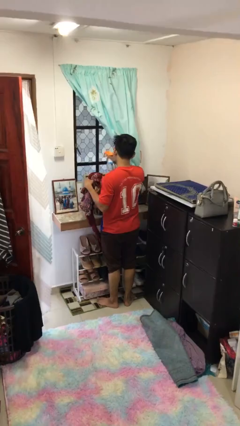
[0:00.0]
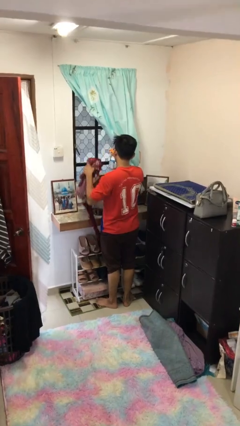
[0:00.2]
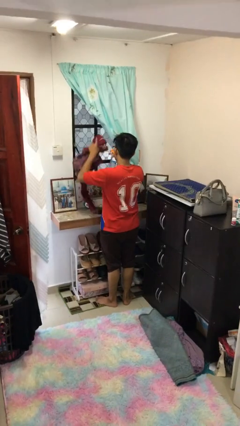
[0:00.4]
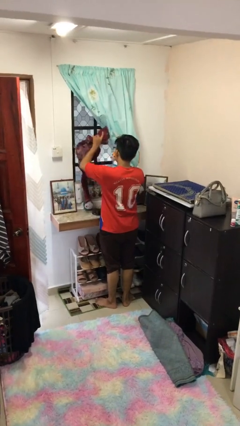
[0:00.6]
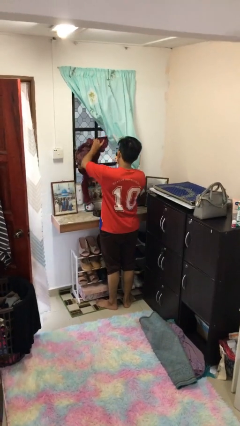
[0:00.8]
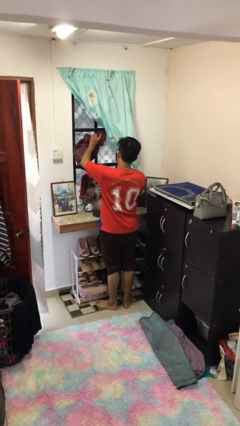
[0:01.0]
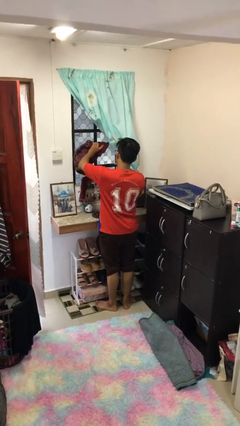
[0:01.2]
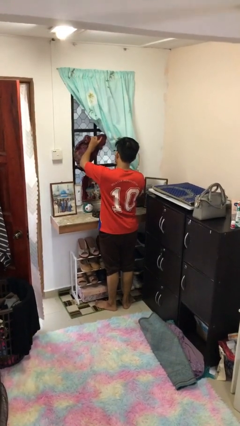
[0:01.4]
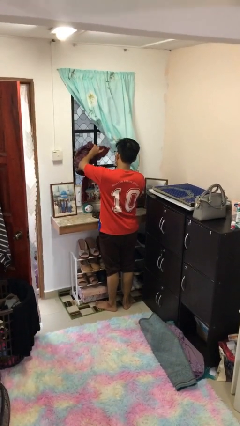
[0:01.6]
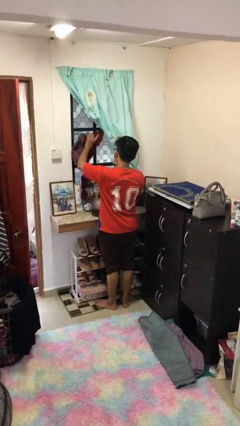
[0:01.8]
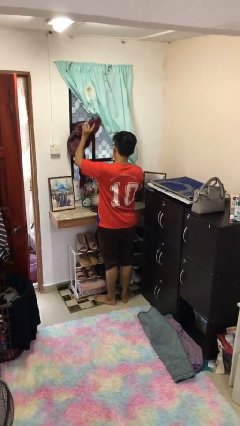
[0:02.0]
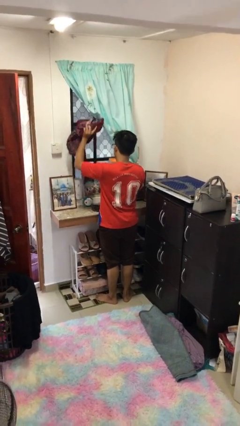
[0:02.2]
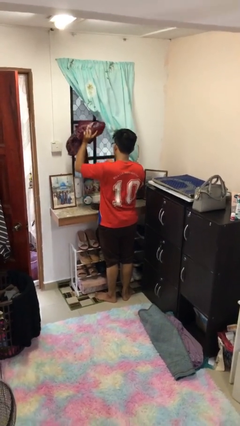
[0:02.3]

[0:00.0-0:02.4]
person washes window

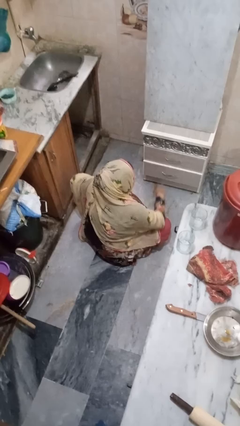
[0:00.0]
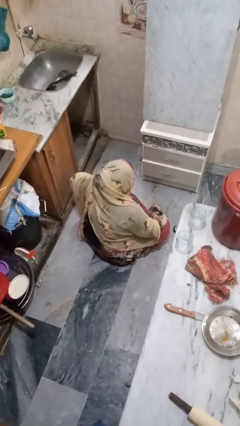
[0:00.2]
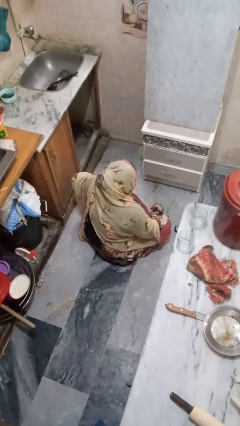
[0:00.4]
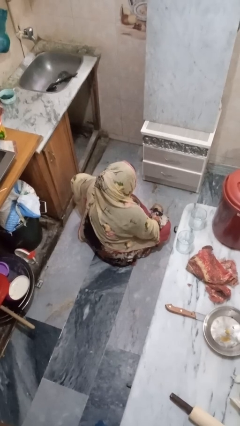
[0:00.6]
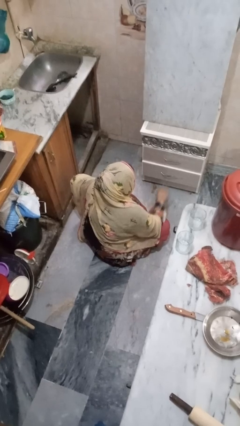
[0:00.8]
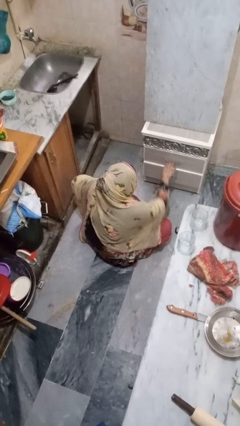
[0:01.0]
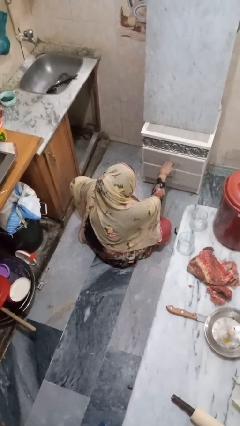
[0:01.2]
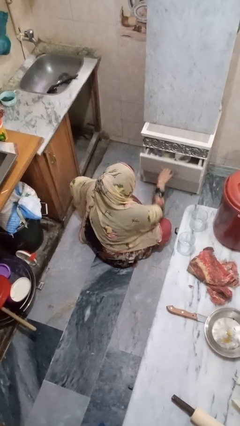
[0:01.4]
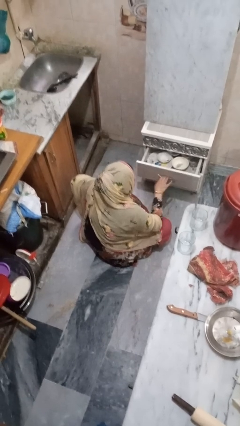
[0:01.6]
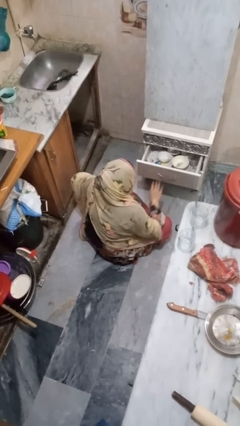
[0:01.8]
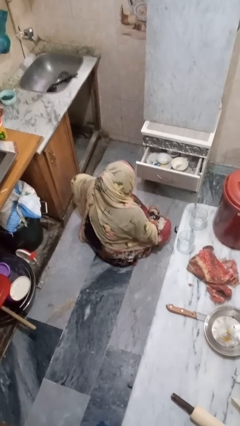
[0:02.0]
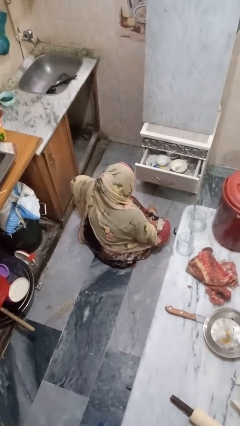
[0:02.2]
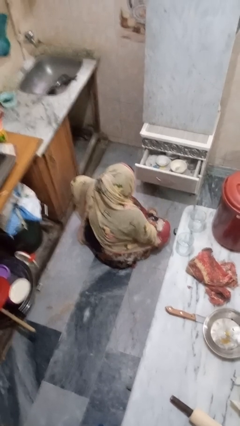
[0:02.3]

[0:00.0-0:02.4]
person opens kitchen drawer

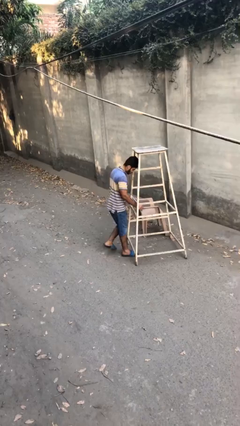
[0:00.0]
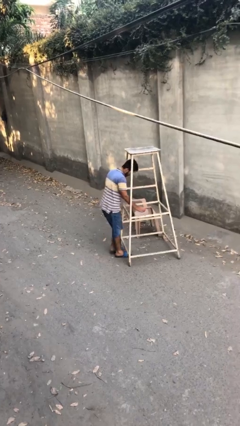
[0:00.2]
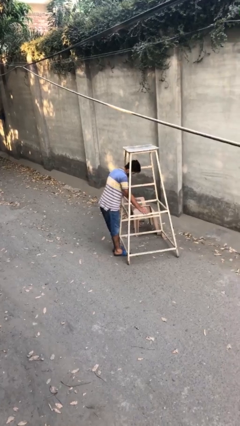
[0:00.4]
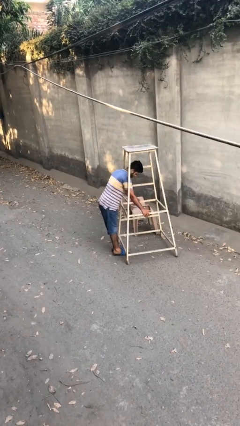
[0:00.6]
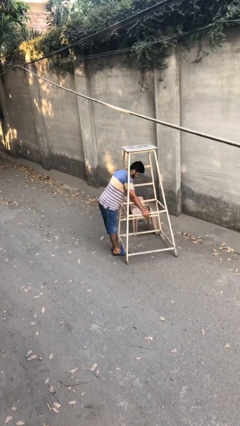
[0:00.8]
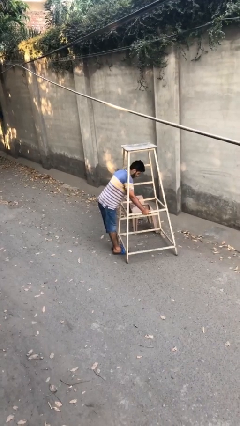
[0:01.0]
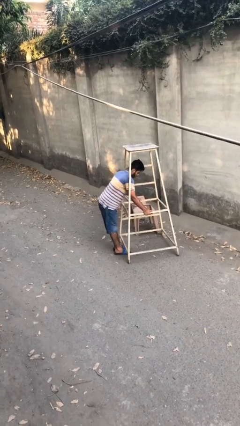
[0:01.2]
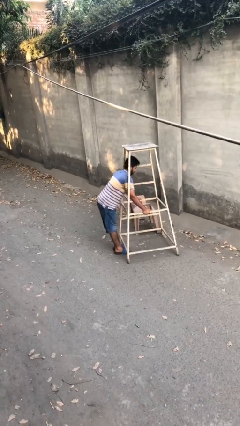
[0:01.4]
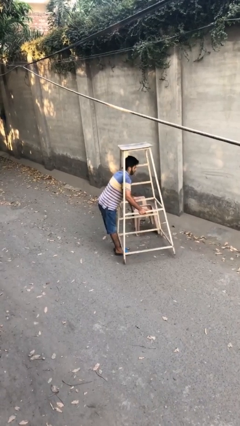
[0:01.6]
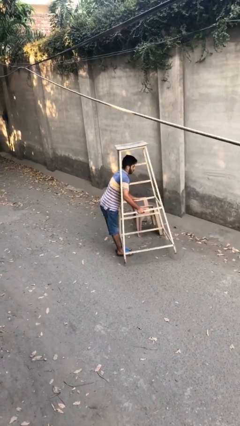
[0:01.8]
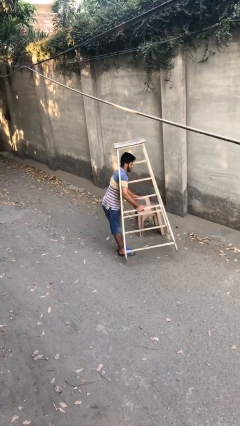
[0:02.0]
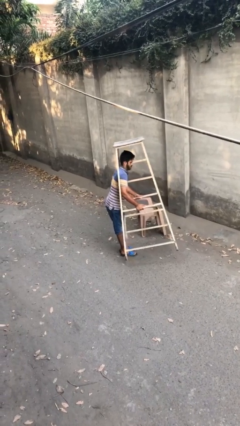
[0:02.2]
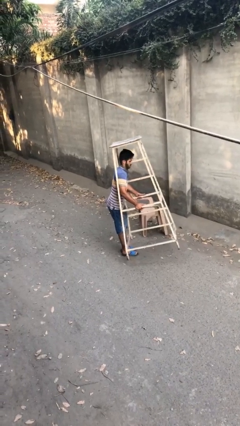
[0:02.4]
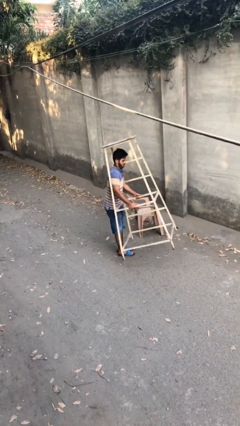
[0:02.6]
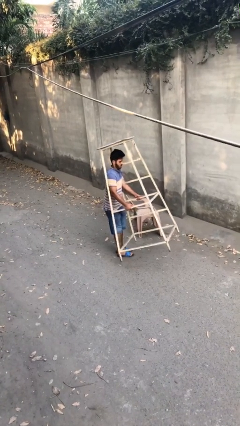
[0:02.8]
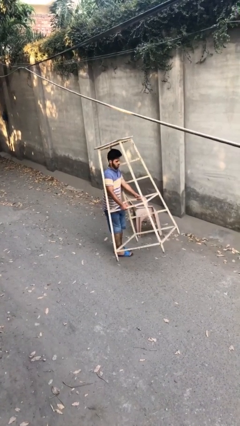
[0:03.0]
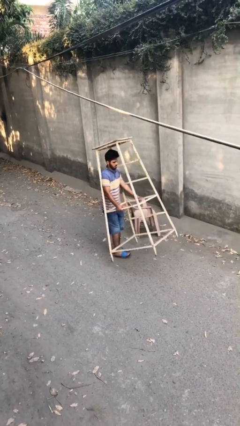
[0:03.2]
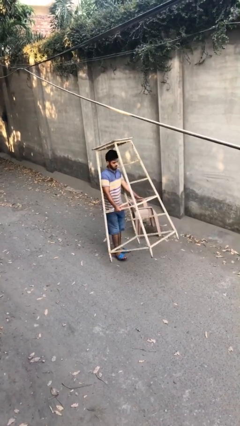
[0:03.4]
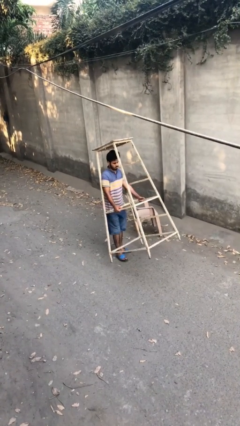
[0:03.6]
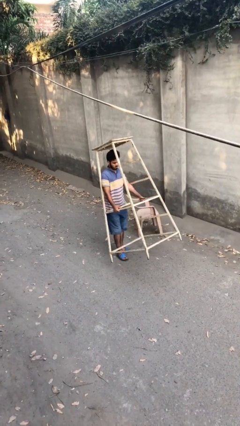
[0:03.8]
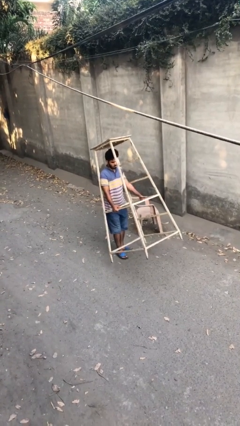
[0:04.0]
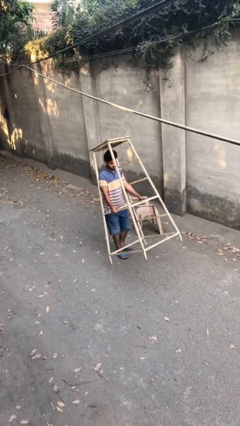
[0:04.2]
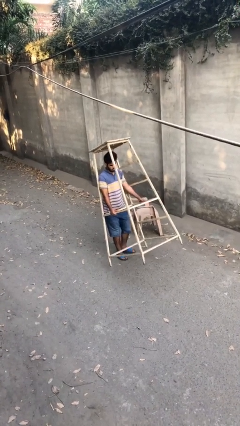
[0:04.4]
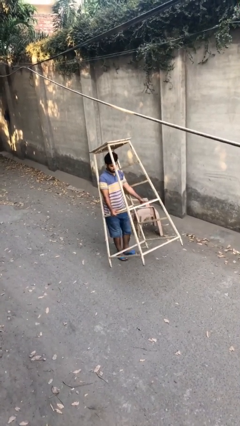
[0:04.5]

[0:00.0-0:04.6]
person picks up object from floor

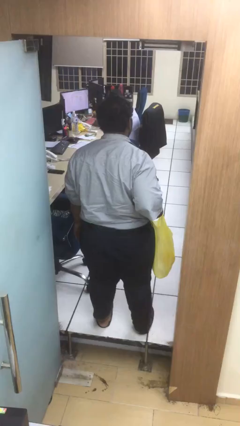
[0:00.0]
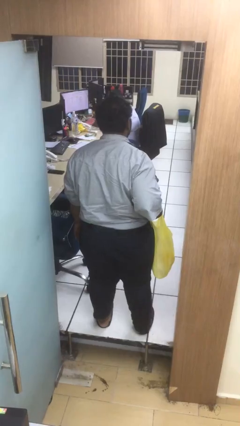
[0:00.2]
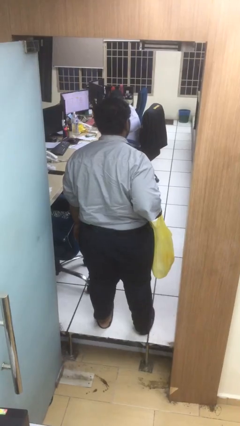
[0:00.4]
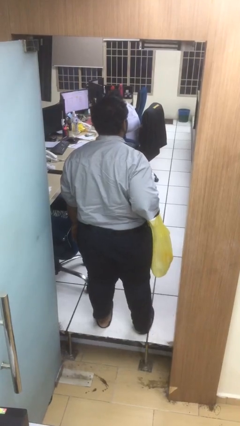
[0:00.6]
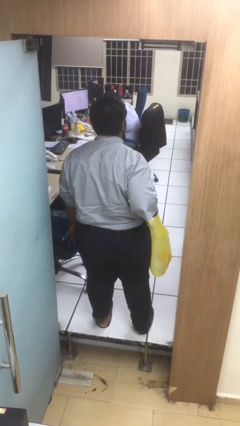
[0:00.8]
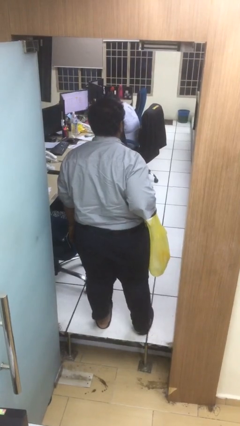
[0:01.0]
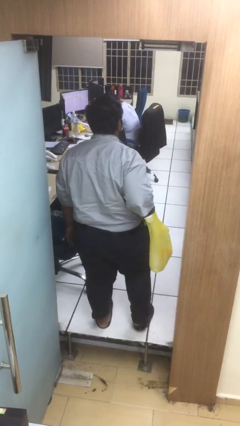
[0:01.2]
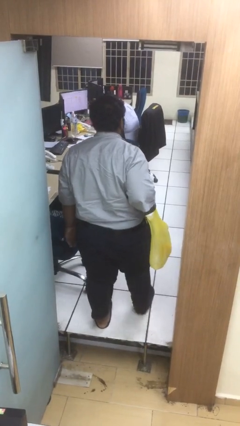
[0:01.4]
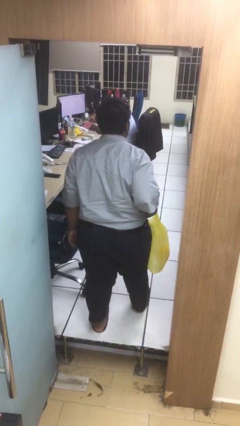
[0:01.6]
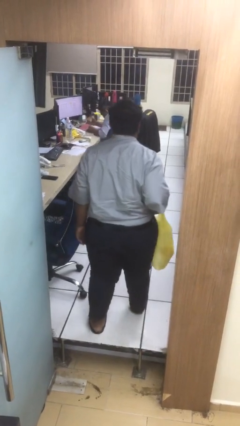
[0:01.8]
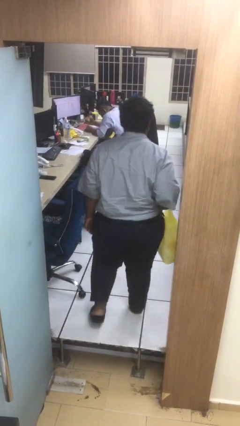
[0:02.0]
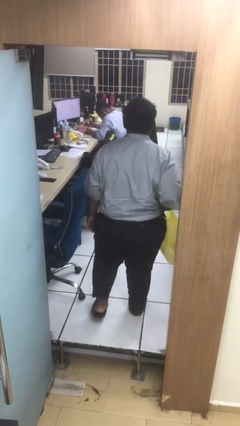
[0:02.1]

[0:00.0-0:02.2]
person carries groceries

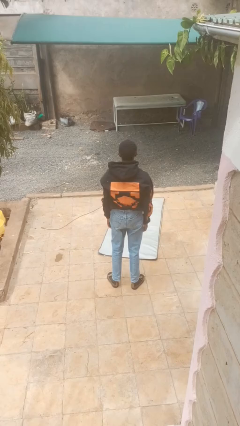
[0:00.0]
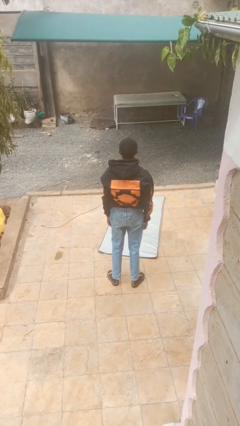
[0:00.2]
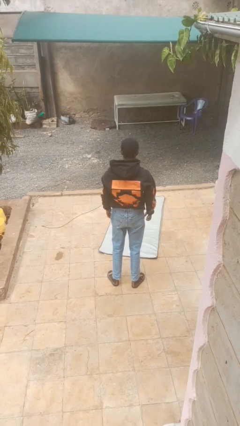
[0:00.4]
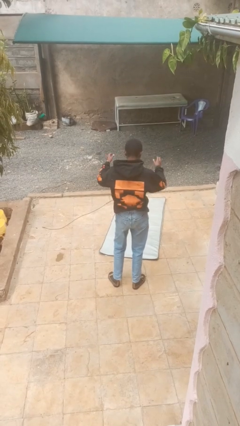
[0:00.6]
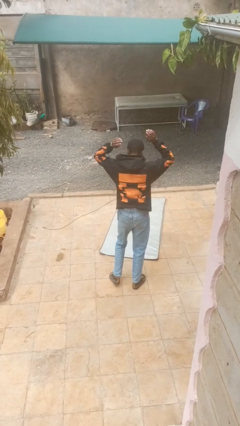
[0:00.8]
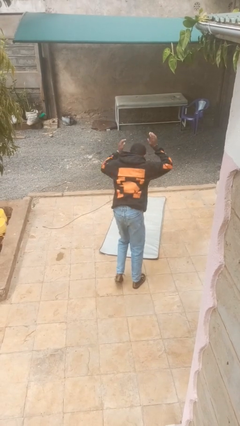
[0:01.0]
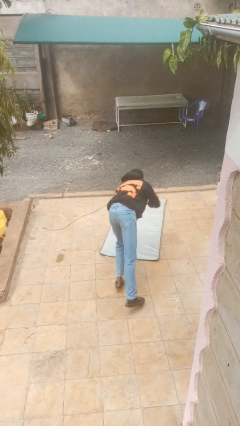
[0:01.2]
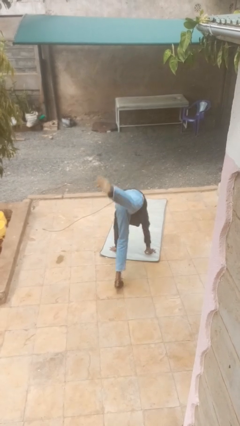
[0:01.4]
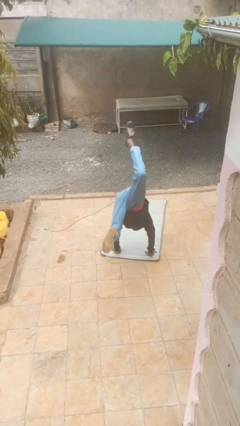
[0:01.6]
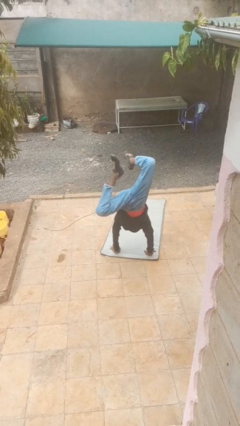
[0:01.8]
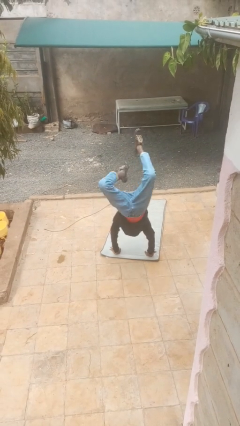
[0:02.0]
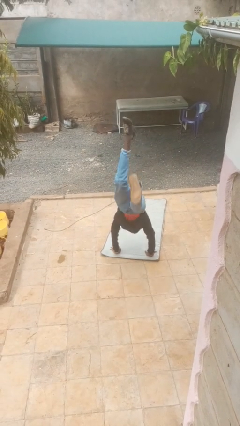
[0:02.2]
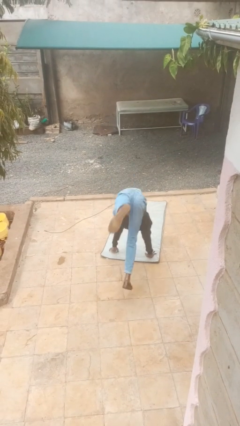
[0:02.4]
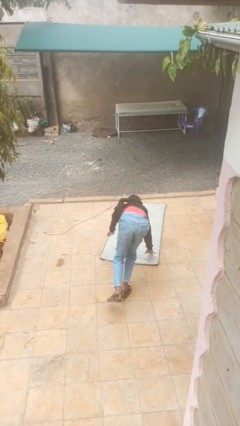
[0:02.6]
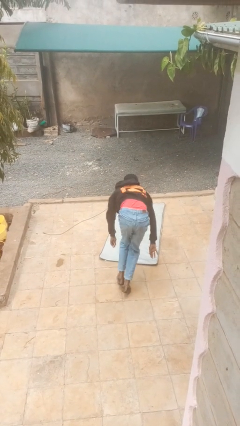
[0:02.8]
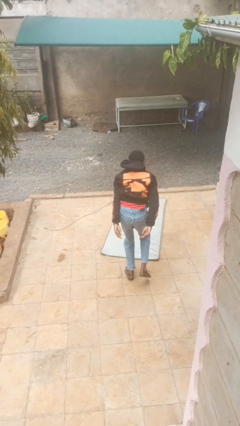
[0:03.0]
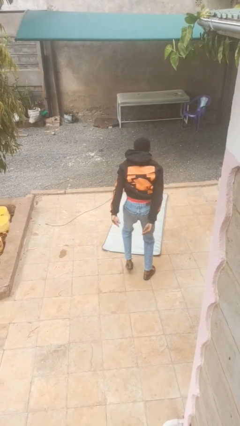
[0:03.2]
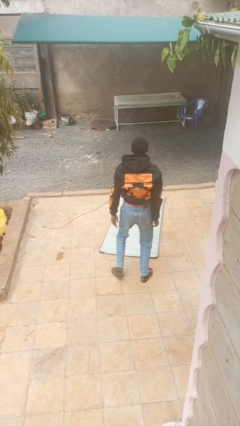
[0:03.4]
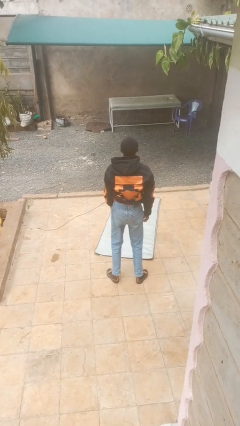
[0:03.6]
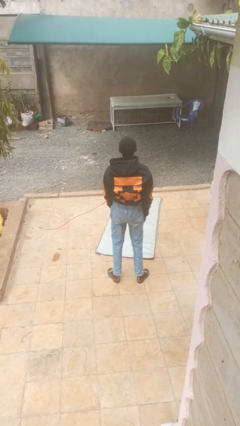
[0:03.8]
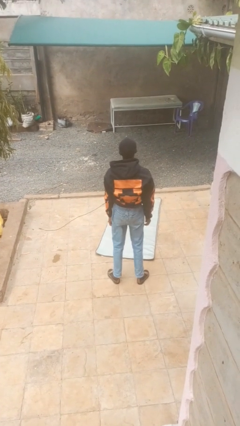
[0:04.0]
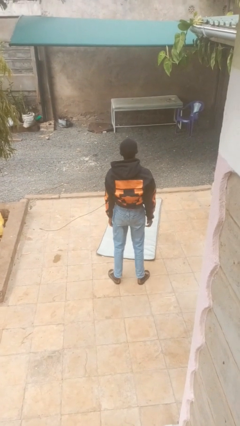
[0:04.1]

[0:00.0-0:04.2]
person handstand

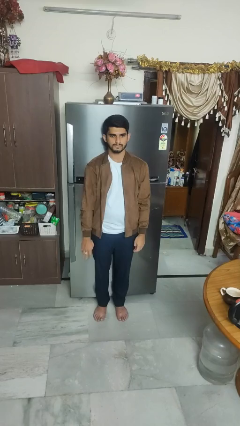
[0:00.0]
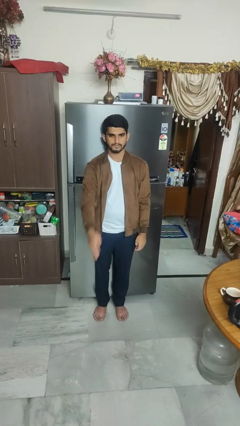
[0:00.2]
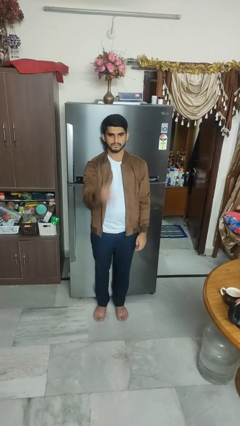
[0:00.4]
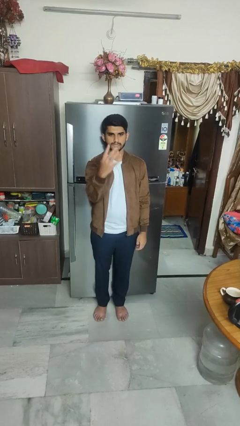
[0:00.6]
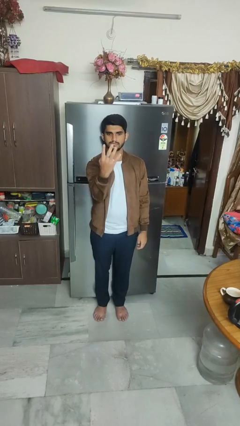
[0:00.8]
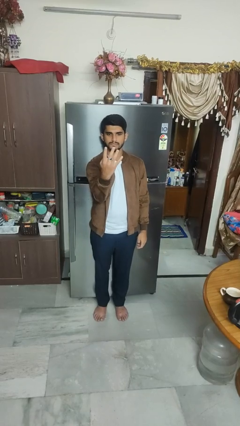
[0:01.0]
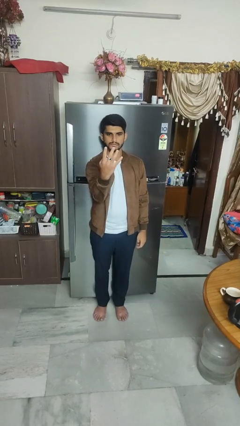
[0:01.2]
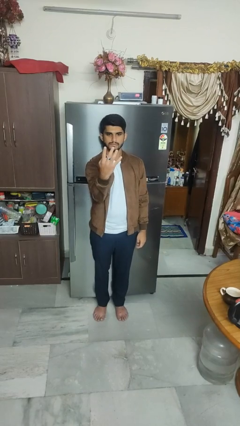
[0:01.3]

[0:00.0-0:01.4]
person gestures number four

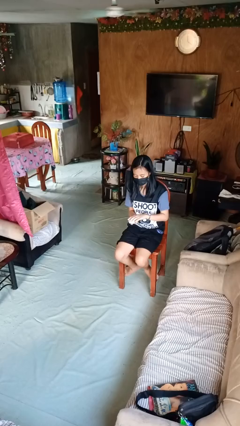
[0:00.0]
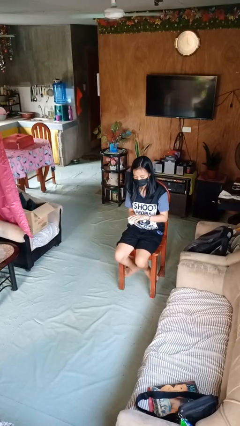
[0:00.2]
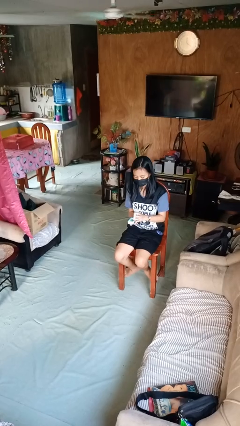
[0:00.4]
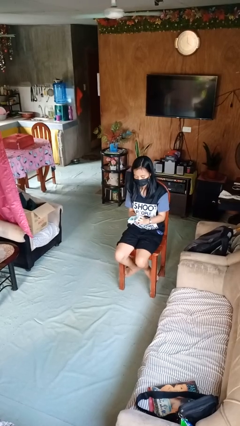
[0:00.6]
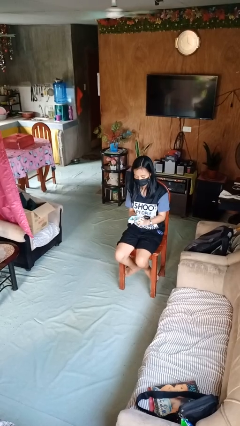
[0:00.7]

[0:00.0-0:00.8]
person opens jewelry box
